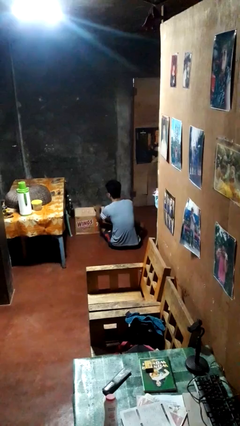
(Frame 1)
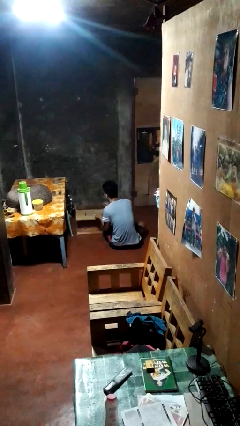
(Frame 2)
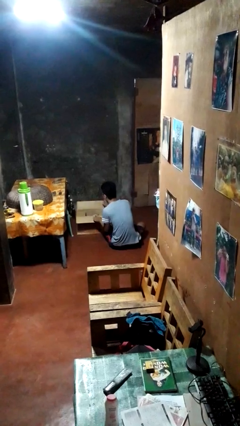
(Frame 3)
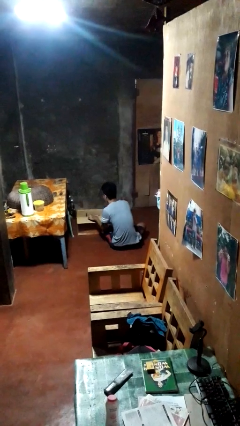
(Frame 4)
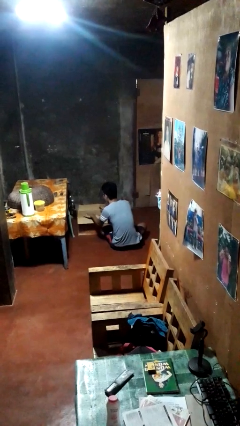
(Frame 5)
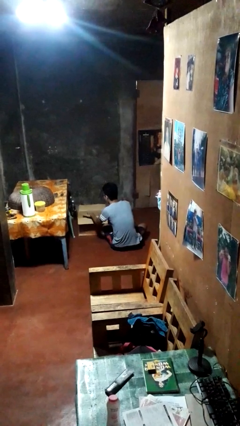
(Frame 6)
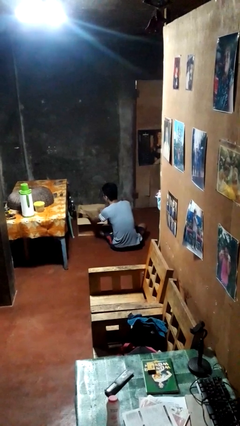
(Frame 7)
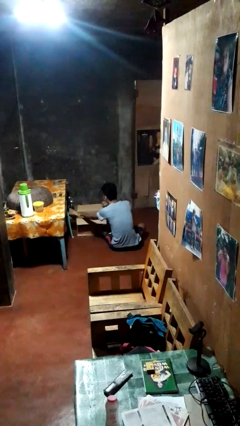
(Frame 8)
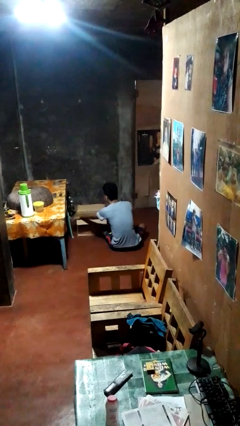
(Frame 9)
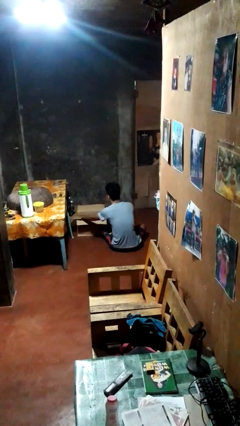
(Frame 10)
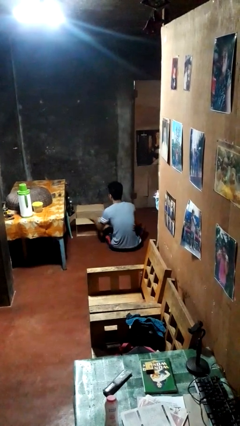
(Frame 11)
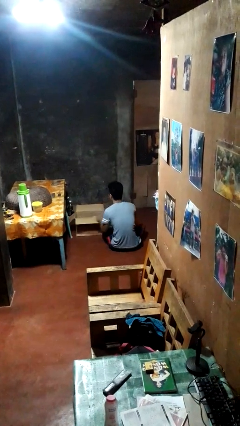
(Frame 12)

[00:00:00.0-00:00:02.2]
person opens box

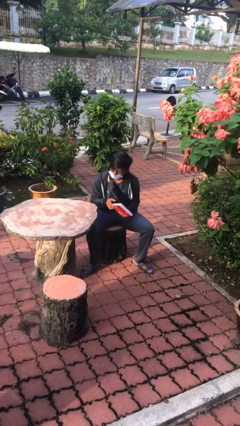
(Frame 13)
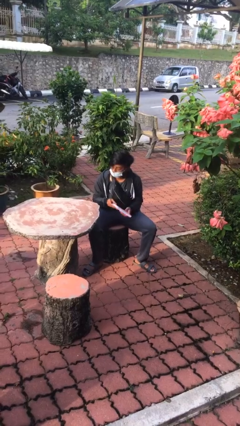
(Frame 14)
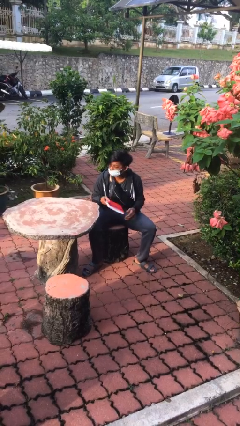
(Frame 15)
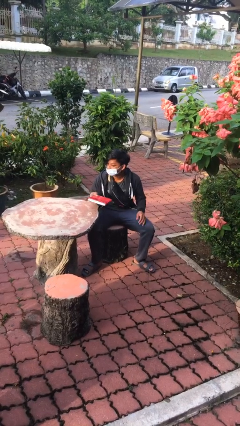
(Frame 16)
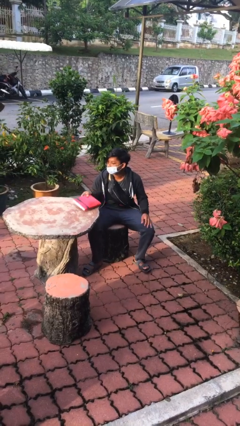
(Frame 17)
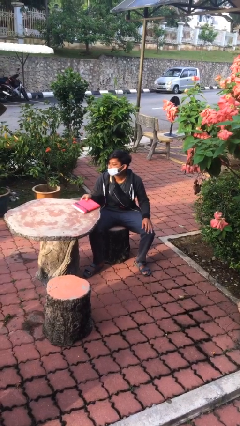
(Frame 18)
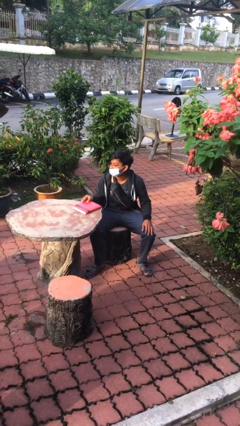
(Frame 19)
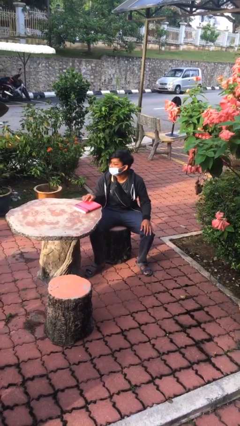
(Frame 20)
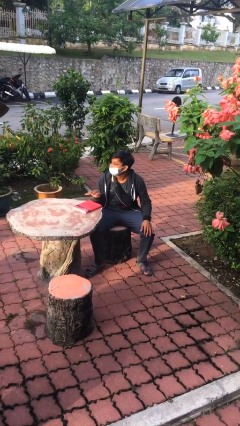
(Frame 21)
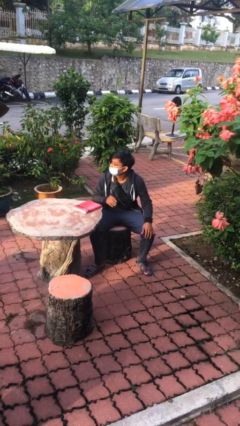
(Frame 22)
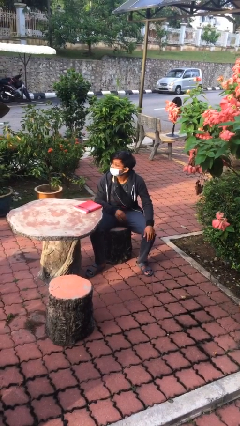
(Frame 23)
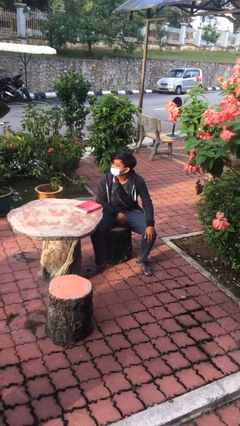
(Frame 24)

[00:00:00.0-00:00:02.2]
person puts down object on table

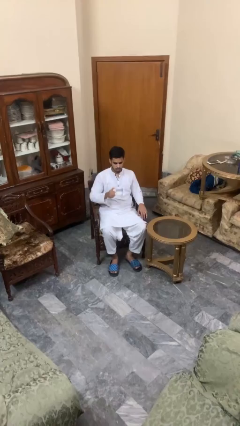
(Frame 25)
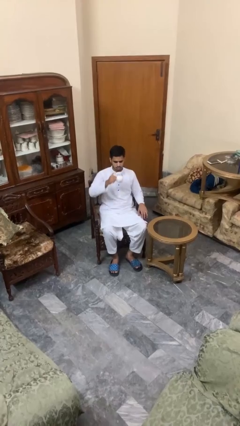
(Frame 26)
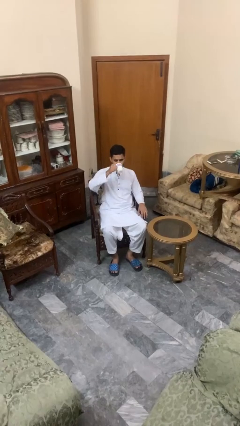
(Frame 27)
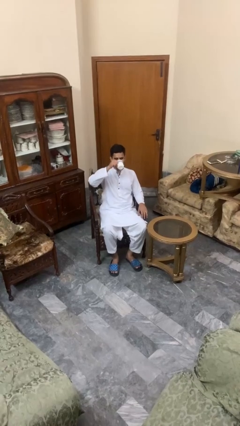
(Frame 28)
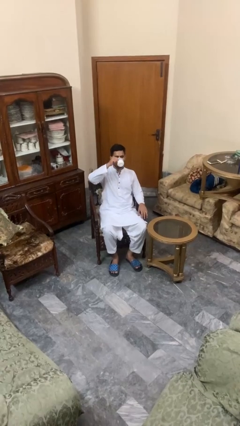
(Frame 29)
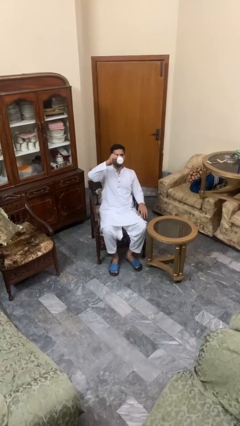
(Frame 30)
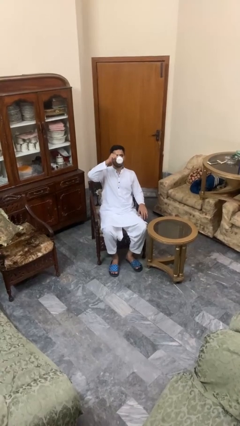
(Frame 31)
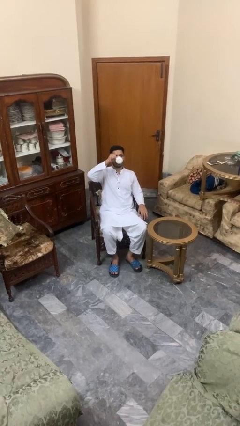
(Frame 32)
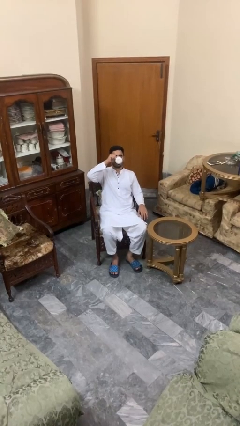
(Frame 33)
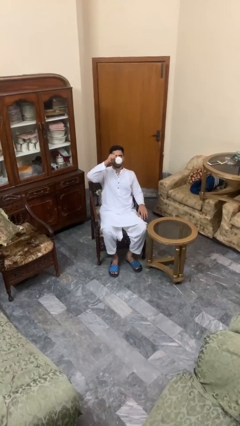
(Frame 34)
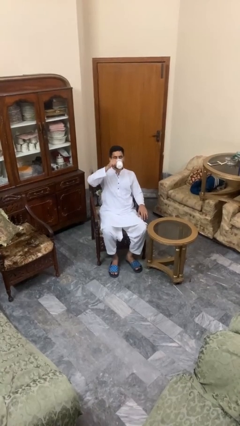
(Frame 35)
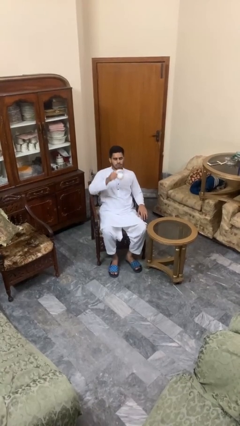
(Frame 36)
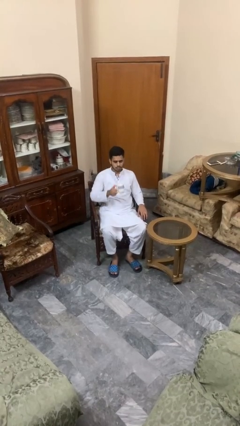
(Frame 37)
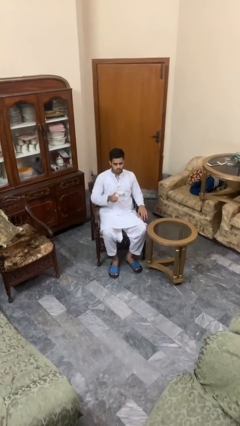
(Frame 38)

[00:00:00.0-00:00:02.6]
person drinks from mug

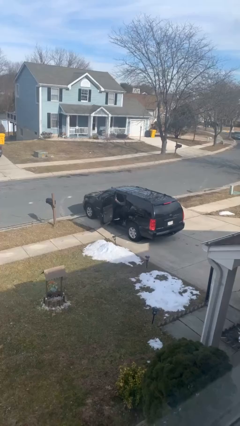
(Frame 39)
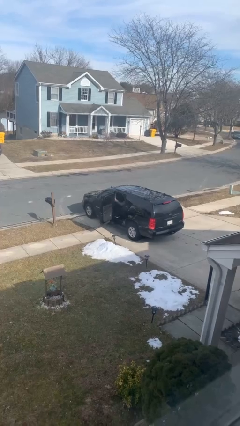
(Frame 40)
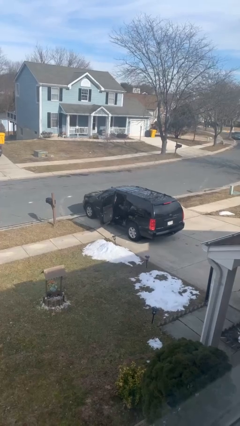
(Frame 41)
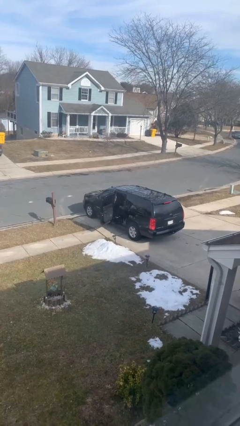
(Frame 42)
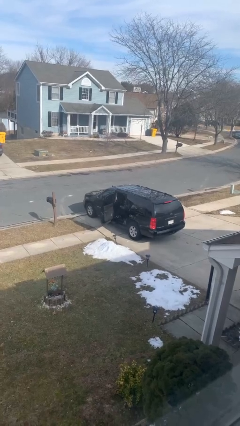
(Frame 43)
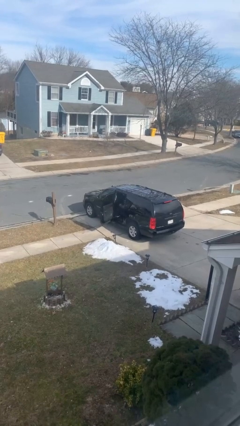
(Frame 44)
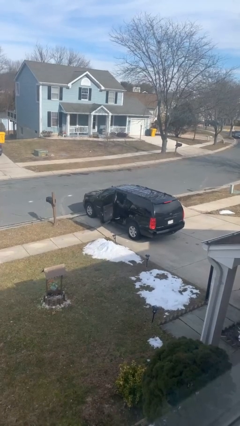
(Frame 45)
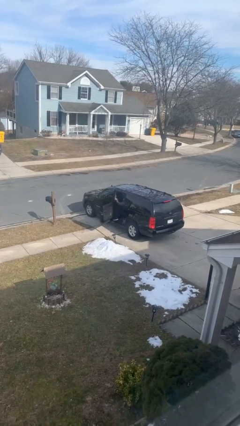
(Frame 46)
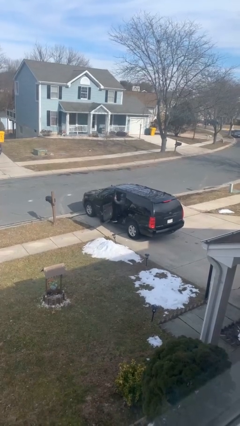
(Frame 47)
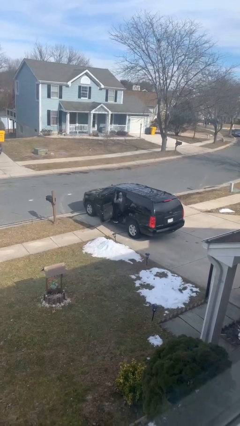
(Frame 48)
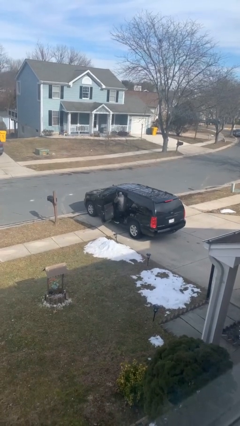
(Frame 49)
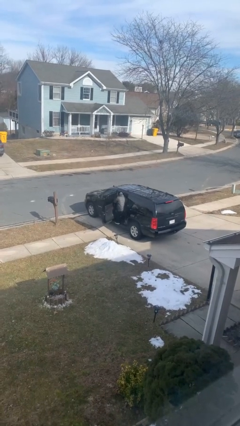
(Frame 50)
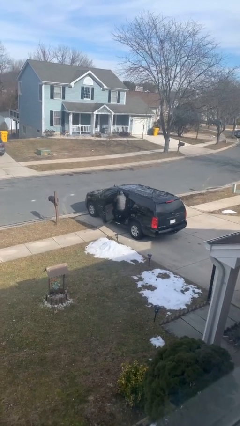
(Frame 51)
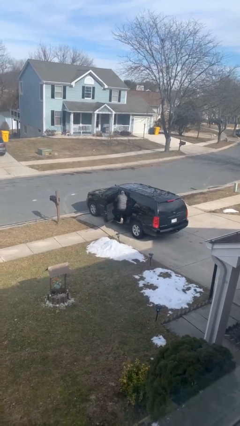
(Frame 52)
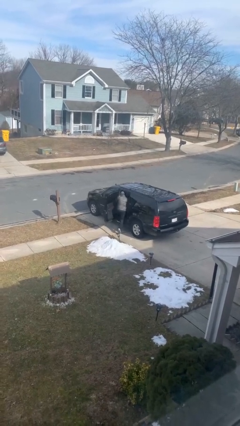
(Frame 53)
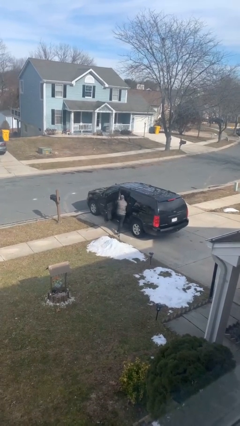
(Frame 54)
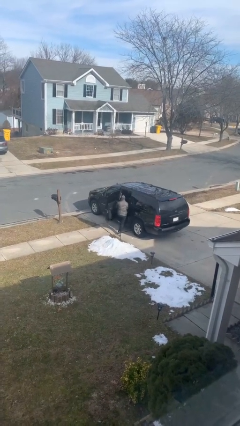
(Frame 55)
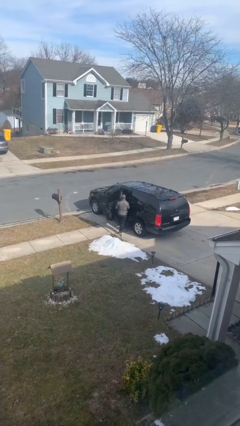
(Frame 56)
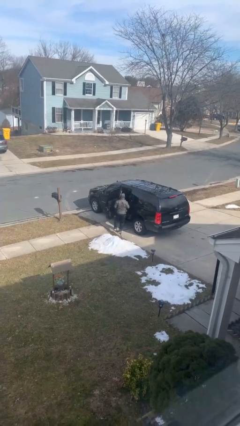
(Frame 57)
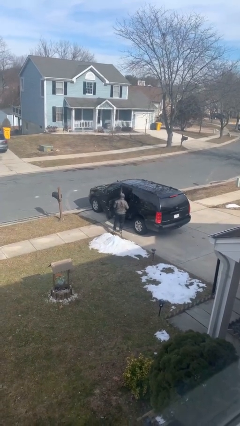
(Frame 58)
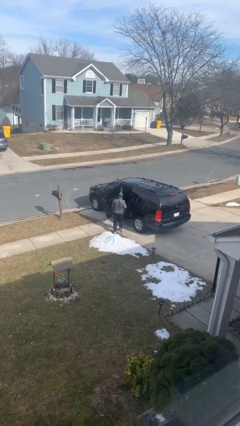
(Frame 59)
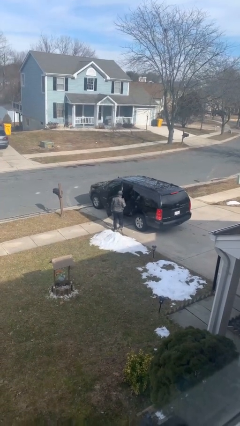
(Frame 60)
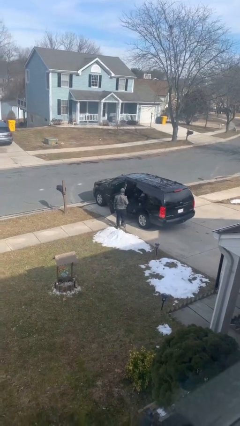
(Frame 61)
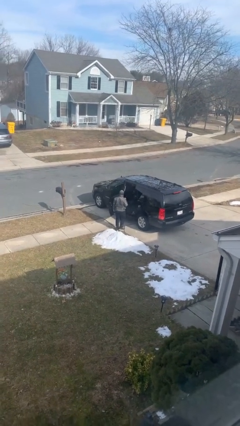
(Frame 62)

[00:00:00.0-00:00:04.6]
person exits car

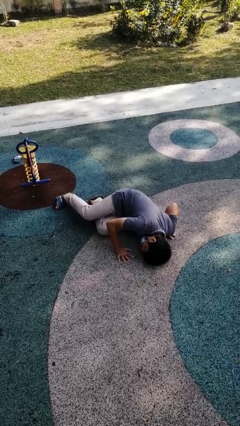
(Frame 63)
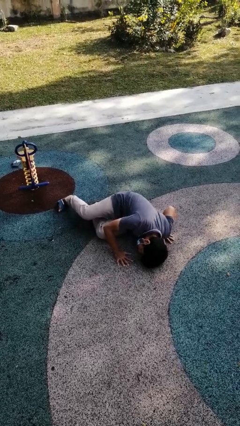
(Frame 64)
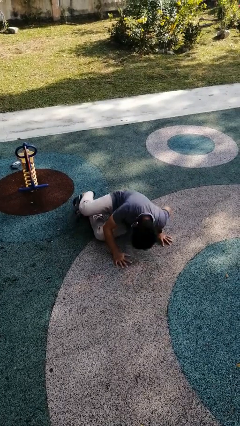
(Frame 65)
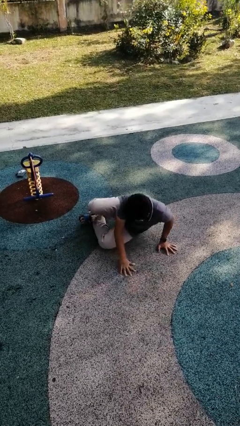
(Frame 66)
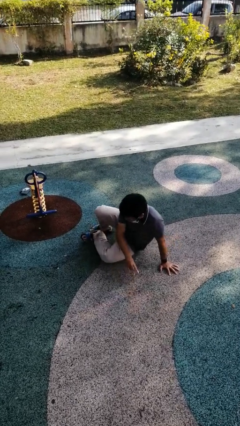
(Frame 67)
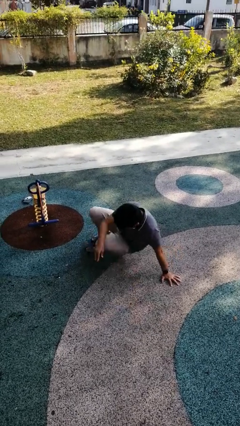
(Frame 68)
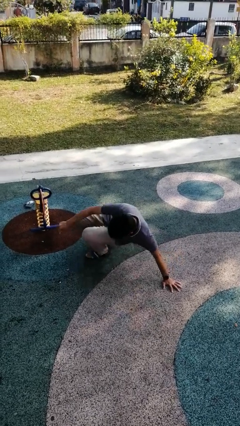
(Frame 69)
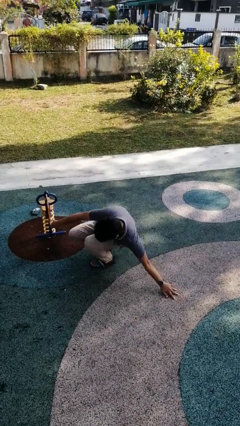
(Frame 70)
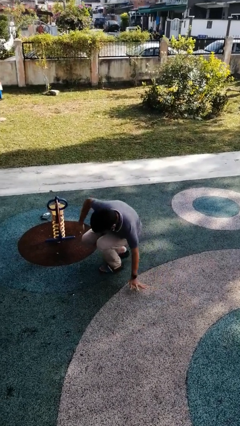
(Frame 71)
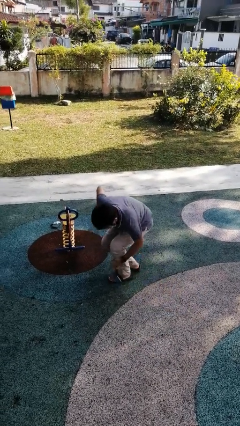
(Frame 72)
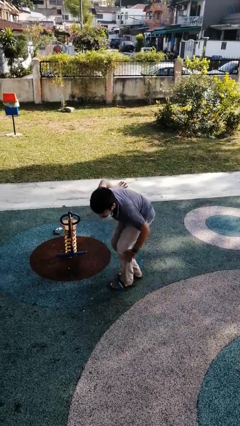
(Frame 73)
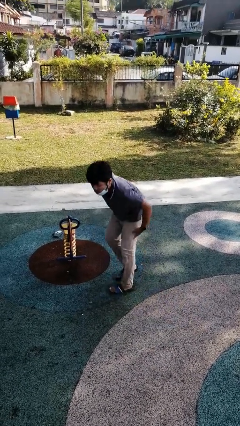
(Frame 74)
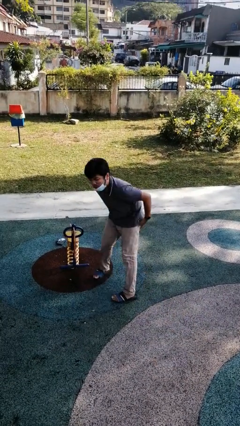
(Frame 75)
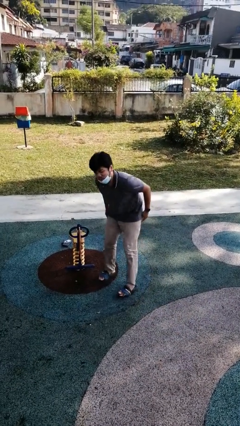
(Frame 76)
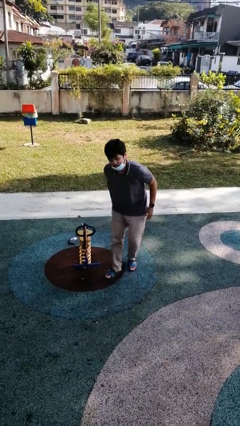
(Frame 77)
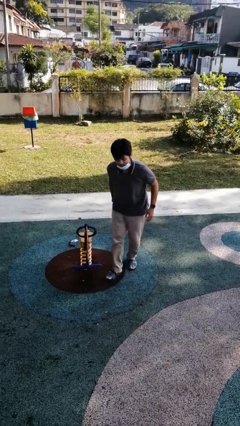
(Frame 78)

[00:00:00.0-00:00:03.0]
person stands up from floor

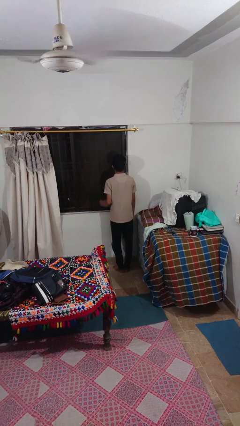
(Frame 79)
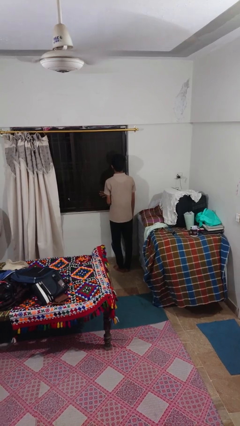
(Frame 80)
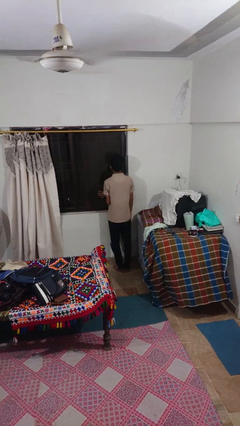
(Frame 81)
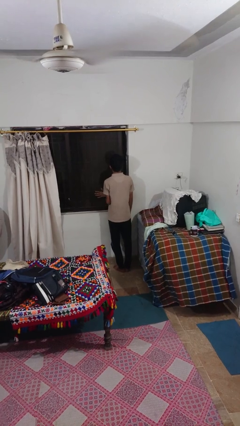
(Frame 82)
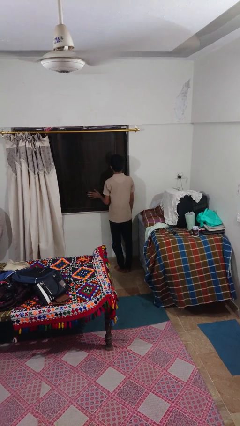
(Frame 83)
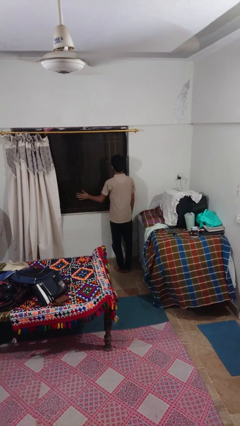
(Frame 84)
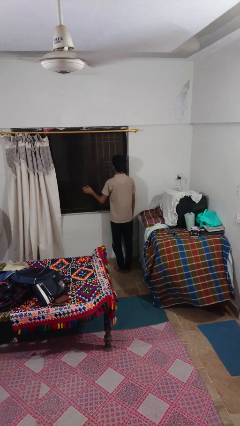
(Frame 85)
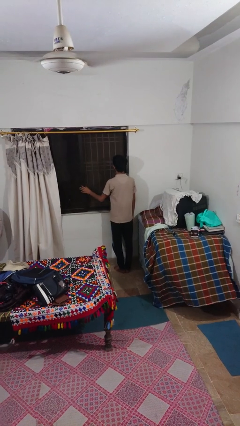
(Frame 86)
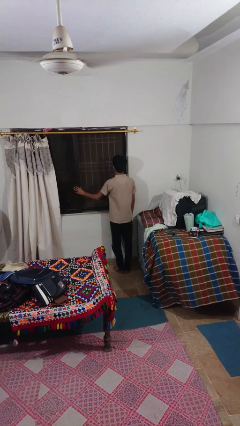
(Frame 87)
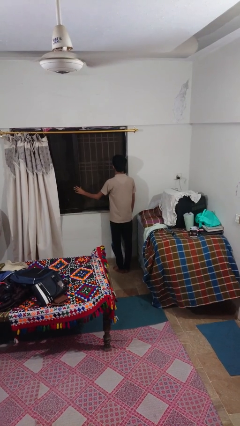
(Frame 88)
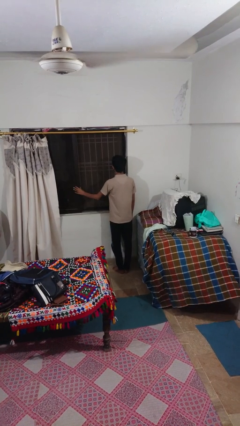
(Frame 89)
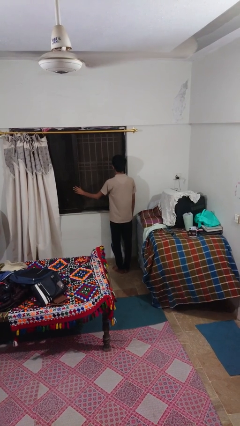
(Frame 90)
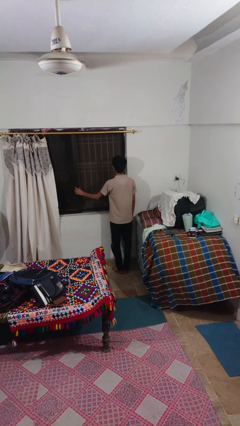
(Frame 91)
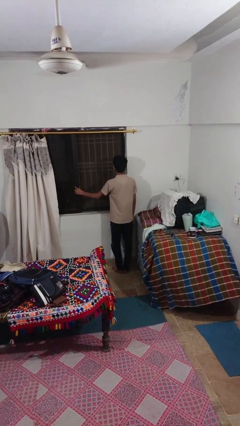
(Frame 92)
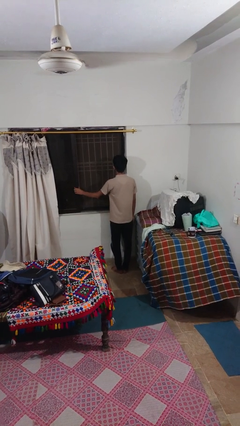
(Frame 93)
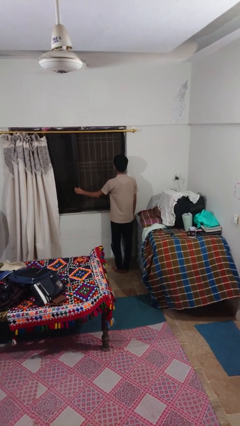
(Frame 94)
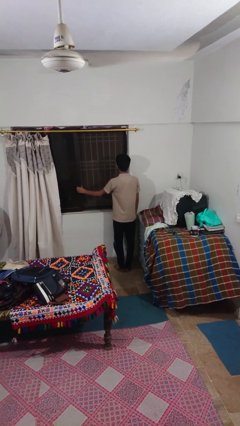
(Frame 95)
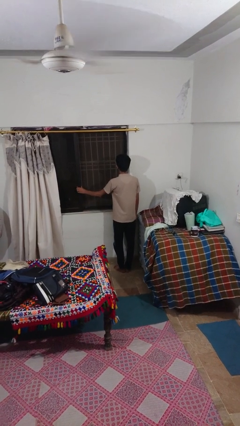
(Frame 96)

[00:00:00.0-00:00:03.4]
person opens sliding door
